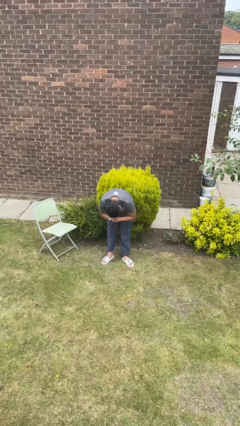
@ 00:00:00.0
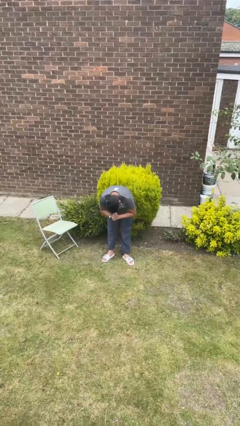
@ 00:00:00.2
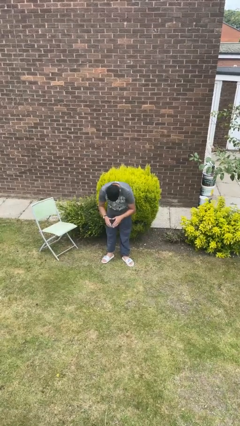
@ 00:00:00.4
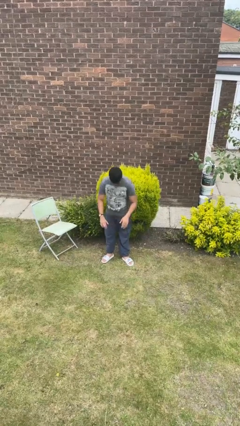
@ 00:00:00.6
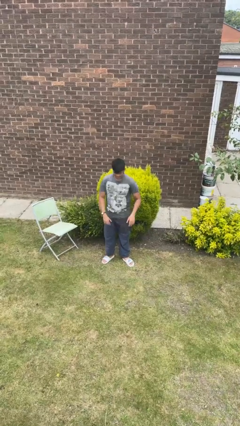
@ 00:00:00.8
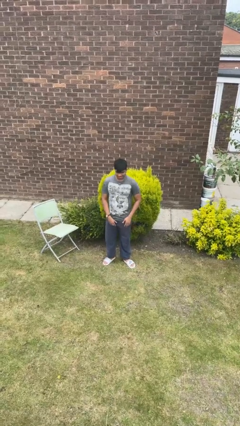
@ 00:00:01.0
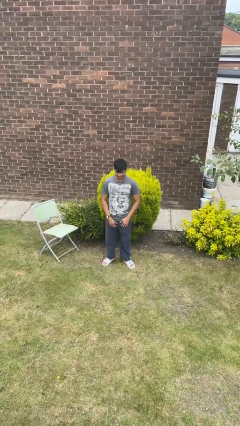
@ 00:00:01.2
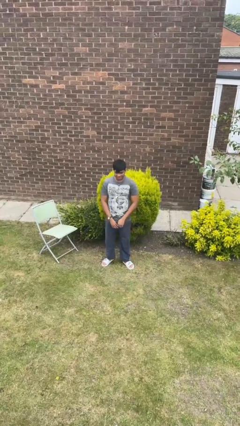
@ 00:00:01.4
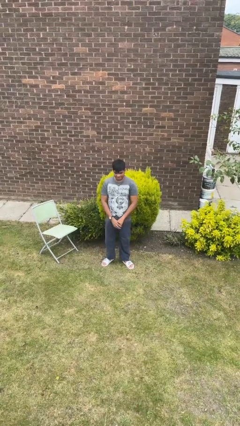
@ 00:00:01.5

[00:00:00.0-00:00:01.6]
person bows

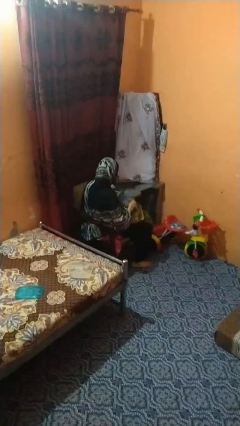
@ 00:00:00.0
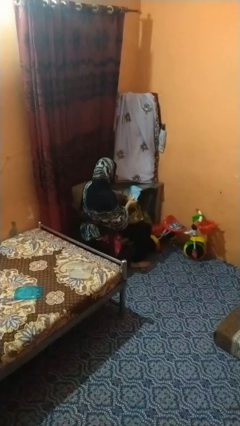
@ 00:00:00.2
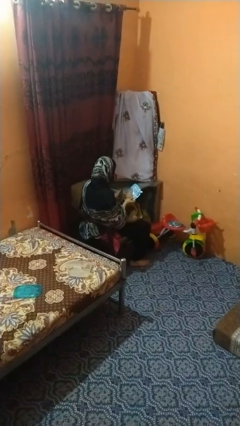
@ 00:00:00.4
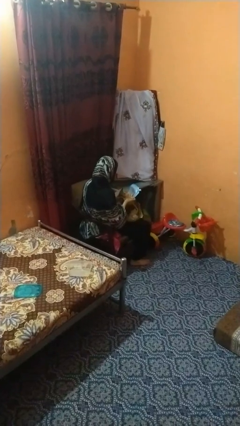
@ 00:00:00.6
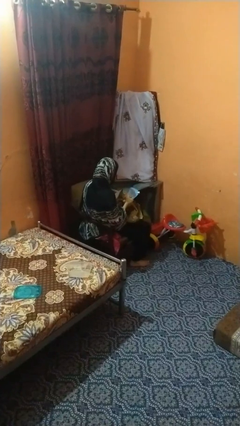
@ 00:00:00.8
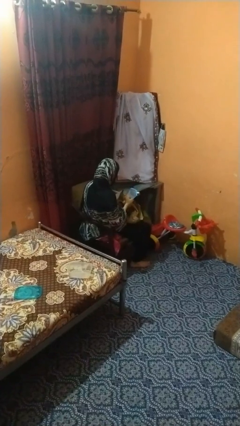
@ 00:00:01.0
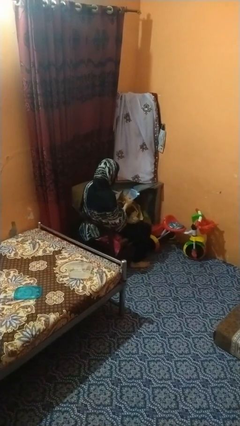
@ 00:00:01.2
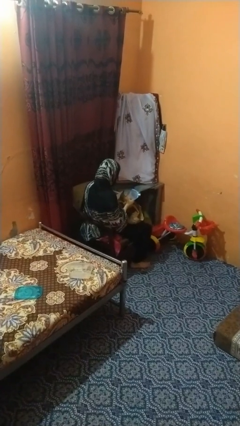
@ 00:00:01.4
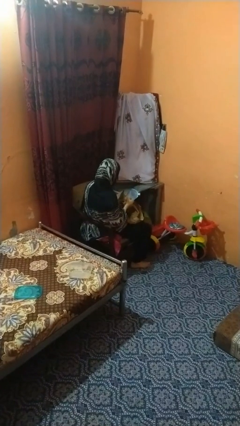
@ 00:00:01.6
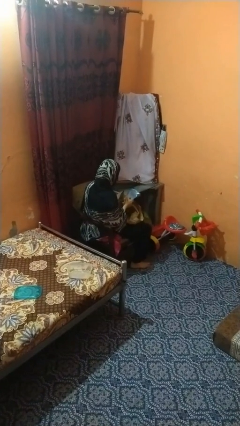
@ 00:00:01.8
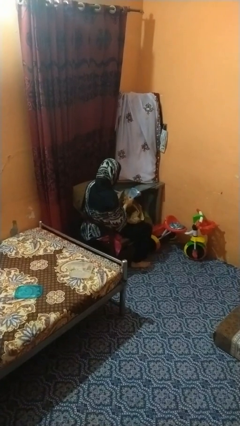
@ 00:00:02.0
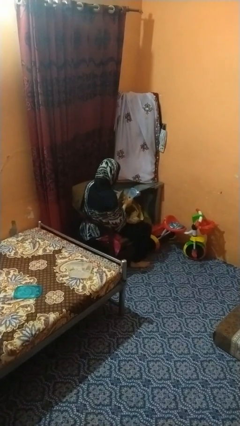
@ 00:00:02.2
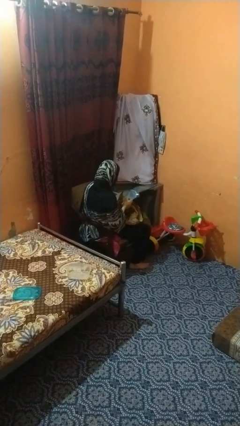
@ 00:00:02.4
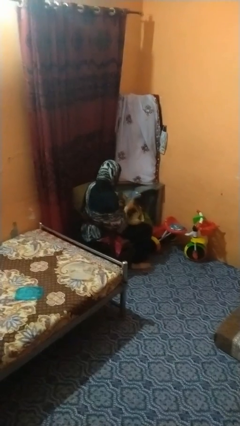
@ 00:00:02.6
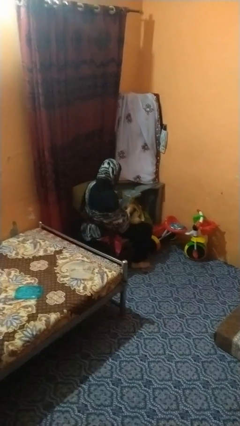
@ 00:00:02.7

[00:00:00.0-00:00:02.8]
person takes object from bag

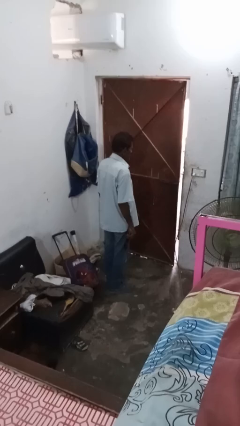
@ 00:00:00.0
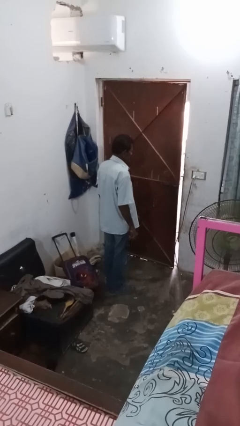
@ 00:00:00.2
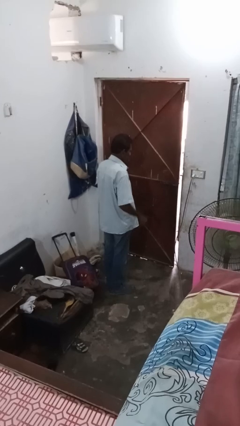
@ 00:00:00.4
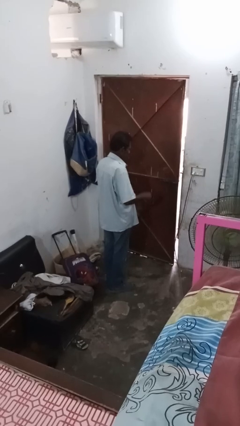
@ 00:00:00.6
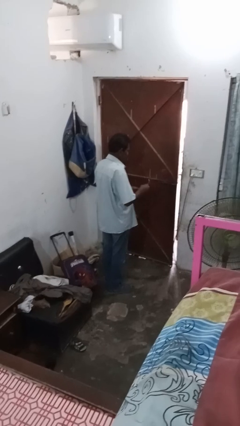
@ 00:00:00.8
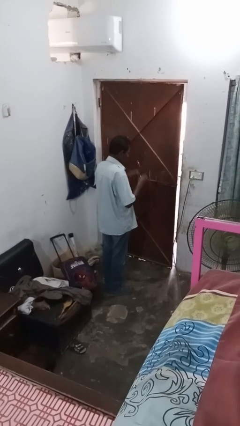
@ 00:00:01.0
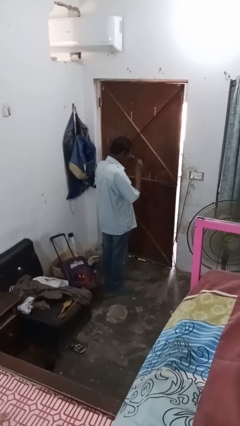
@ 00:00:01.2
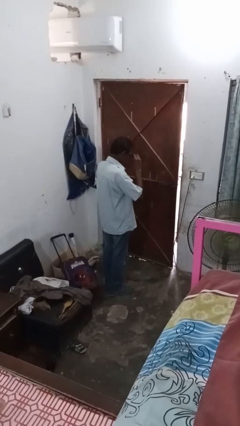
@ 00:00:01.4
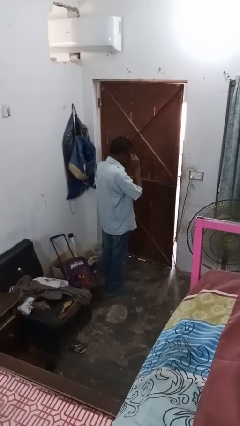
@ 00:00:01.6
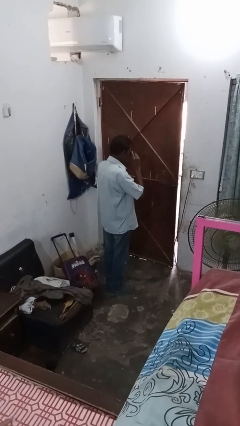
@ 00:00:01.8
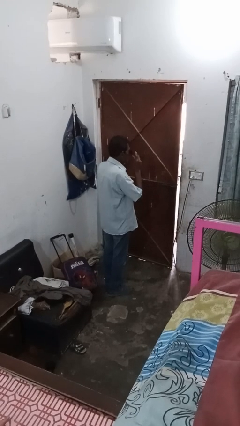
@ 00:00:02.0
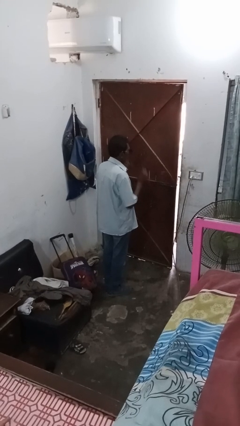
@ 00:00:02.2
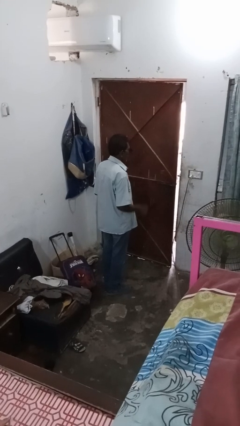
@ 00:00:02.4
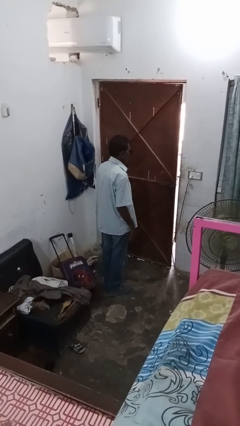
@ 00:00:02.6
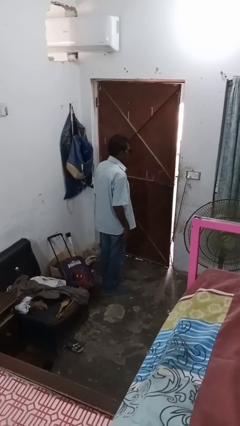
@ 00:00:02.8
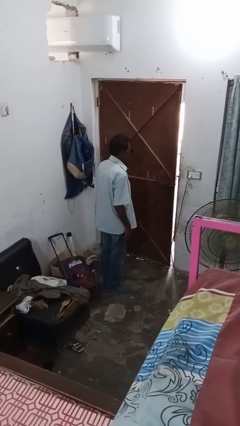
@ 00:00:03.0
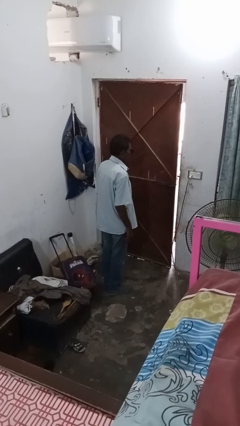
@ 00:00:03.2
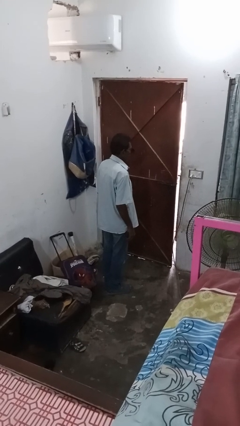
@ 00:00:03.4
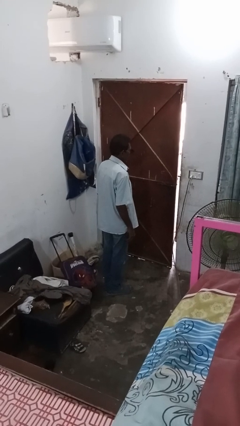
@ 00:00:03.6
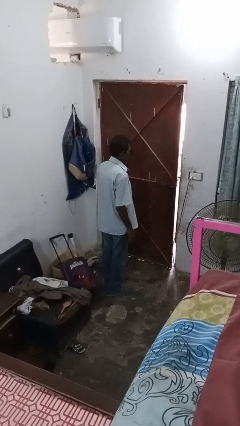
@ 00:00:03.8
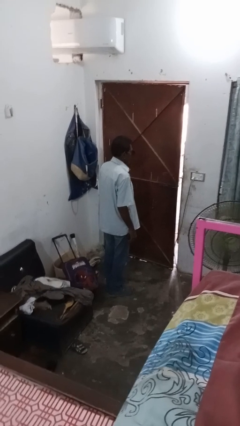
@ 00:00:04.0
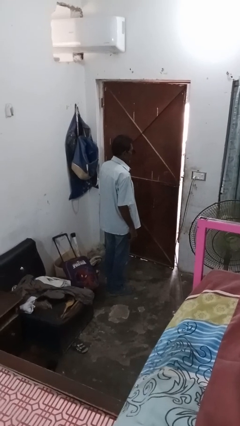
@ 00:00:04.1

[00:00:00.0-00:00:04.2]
person puts on sunglasses

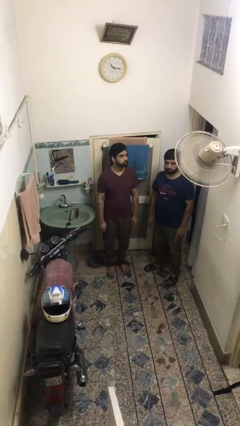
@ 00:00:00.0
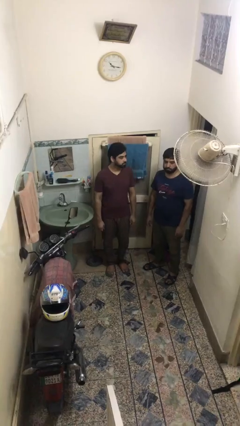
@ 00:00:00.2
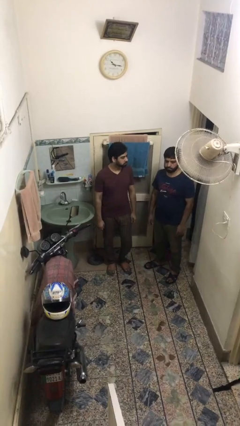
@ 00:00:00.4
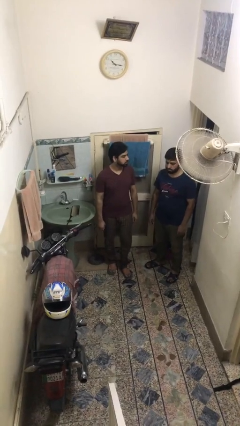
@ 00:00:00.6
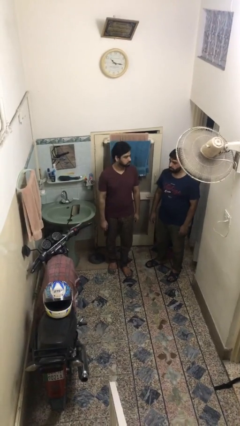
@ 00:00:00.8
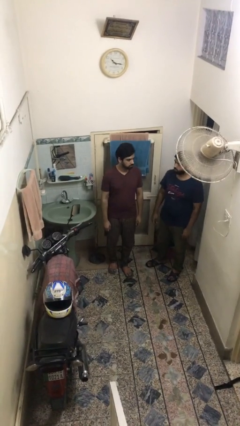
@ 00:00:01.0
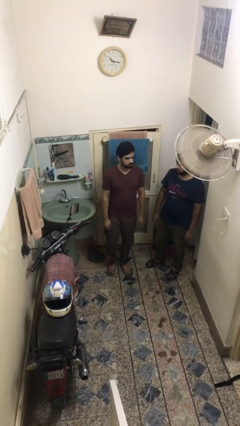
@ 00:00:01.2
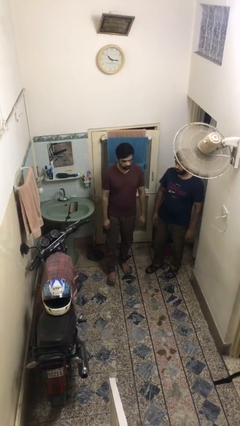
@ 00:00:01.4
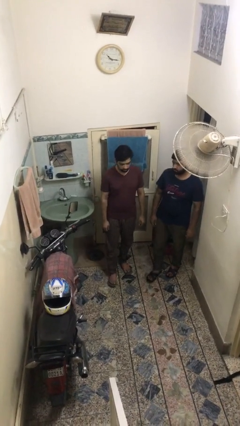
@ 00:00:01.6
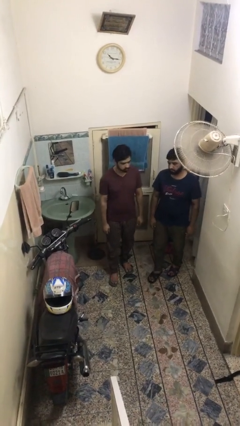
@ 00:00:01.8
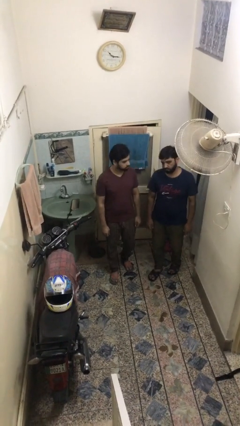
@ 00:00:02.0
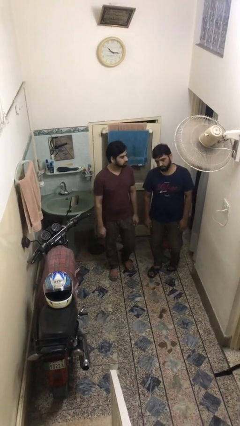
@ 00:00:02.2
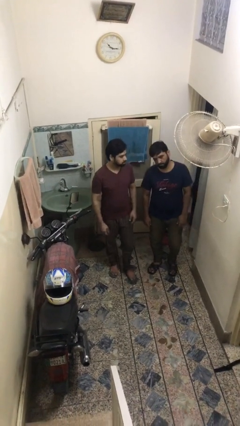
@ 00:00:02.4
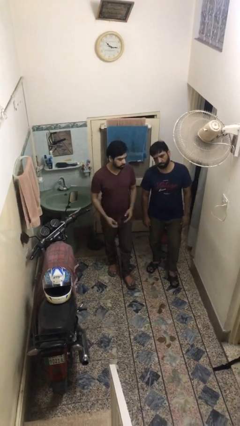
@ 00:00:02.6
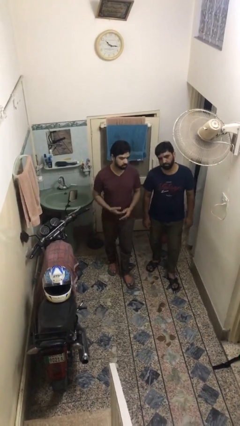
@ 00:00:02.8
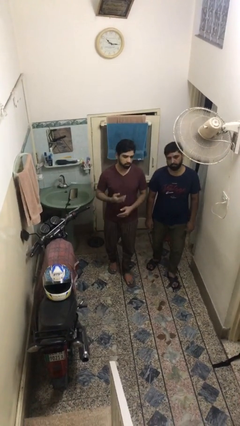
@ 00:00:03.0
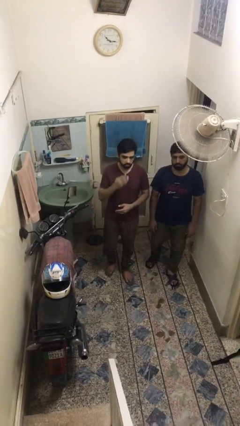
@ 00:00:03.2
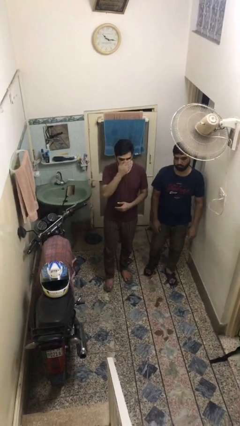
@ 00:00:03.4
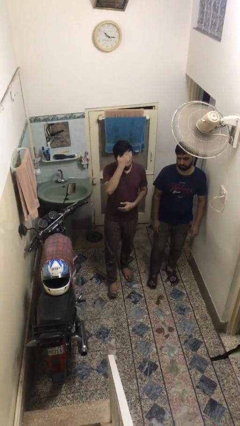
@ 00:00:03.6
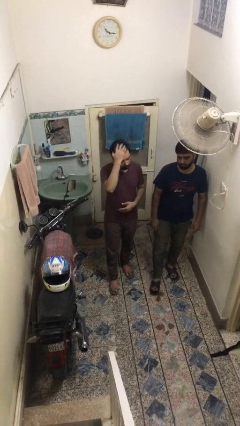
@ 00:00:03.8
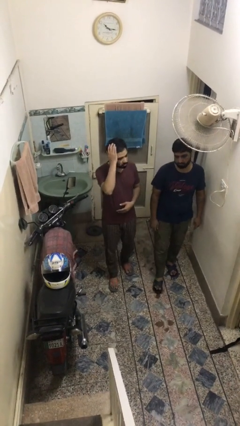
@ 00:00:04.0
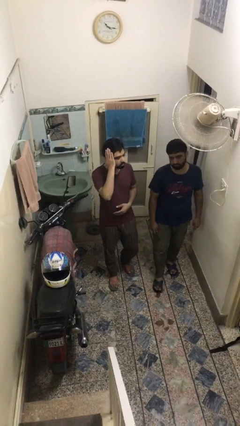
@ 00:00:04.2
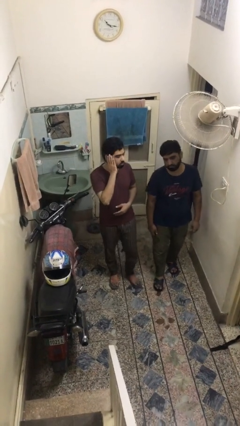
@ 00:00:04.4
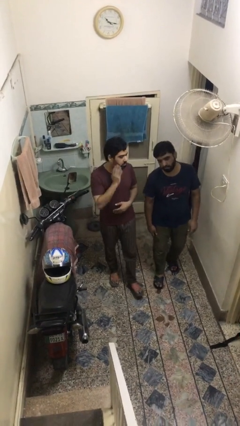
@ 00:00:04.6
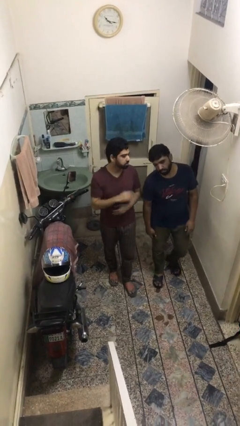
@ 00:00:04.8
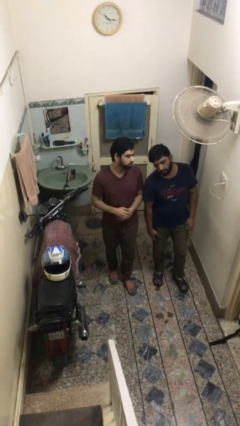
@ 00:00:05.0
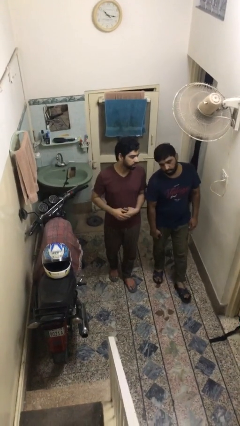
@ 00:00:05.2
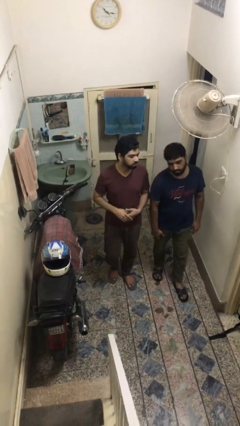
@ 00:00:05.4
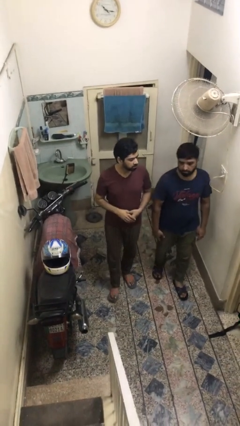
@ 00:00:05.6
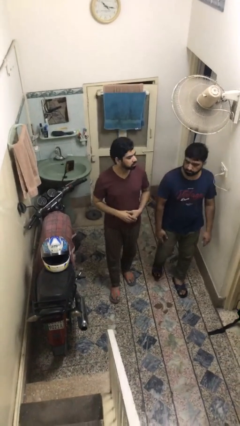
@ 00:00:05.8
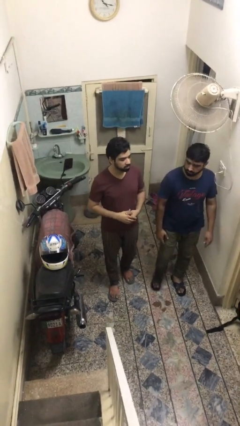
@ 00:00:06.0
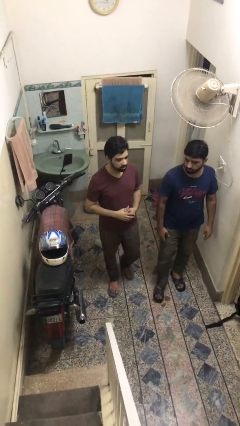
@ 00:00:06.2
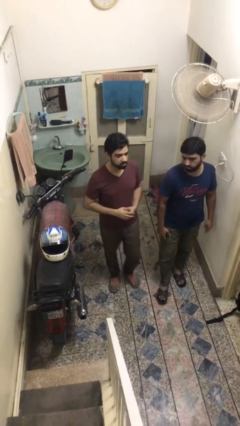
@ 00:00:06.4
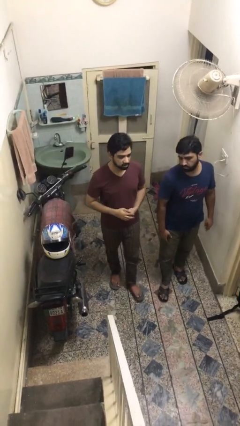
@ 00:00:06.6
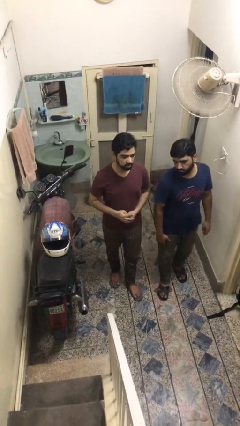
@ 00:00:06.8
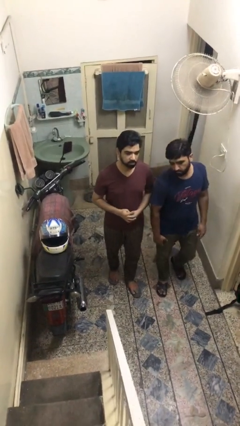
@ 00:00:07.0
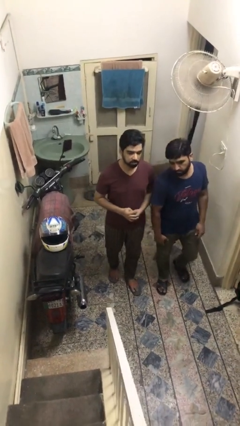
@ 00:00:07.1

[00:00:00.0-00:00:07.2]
person talks to person

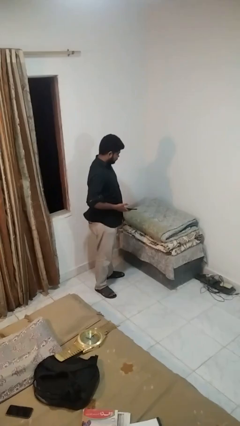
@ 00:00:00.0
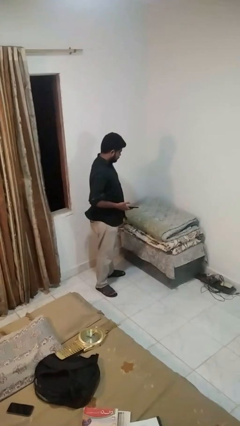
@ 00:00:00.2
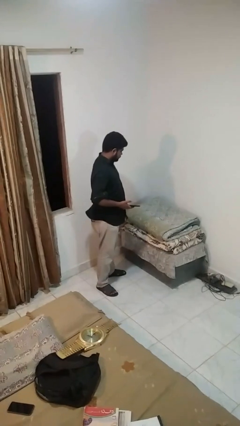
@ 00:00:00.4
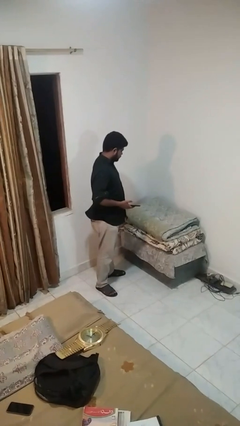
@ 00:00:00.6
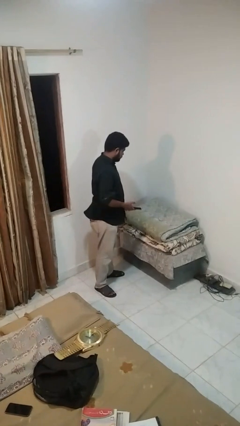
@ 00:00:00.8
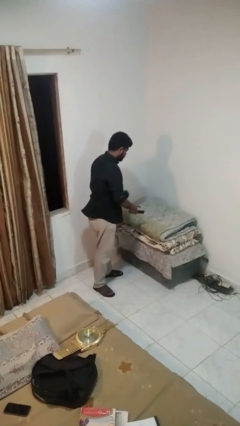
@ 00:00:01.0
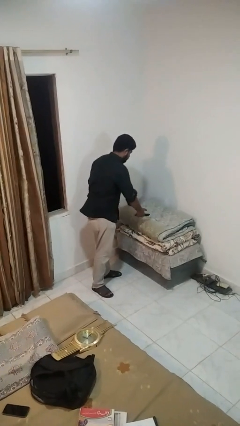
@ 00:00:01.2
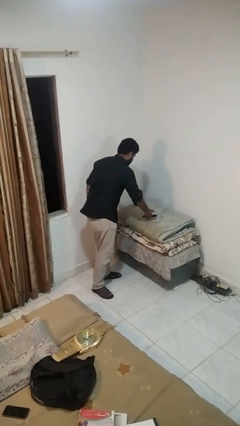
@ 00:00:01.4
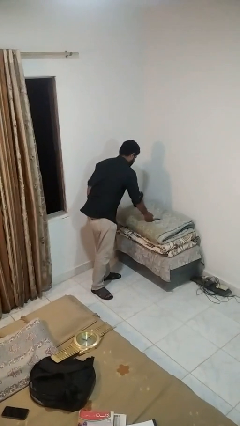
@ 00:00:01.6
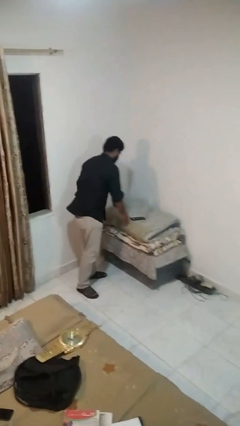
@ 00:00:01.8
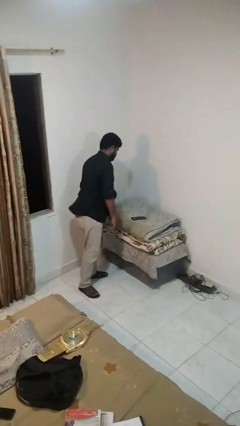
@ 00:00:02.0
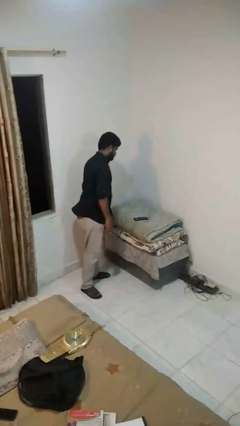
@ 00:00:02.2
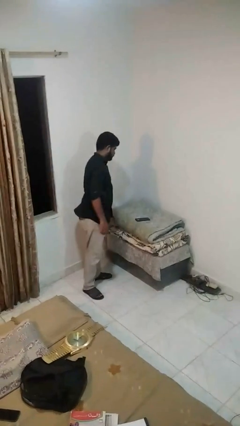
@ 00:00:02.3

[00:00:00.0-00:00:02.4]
person puts down object on couch
